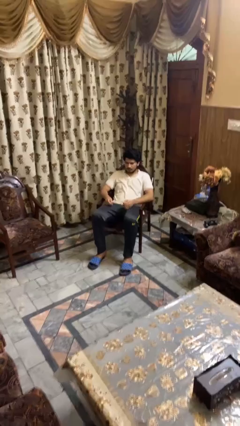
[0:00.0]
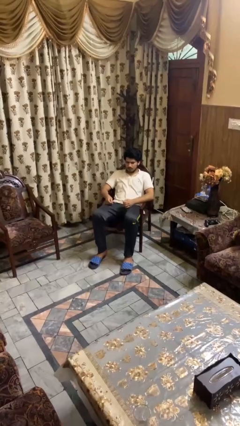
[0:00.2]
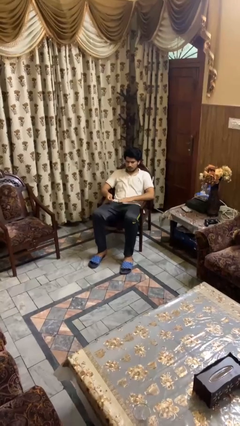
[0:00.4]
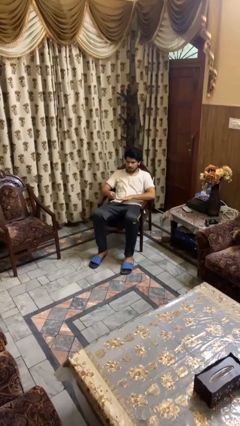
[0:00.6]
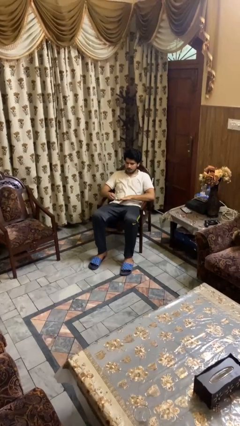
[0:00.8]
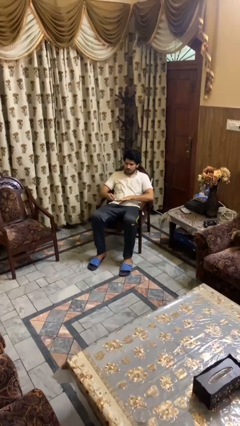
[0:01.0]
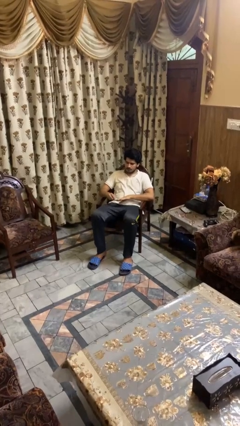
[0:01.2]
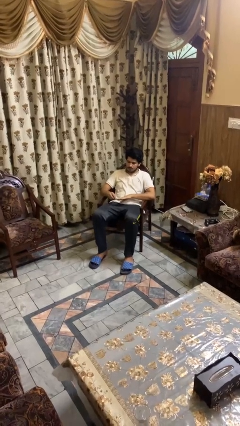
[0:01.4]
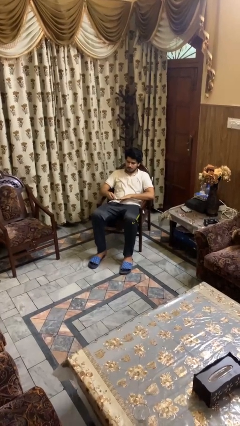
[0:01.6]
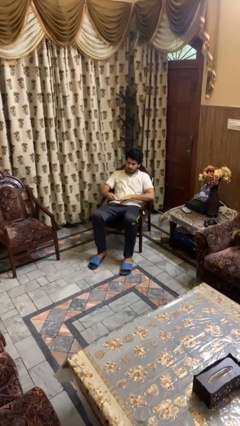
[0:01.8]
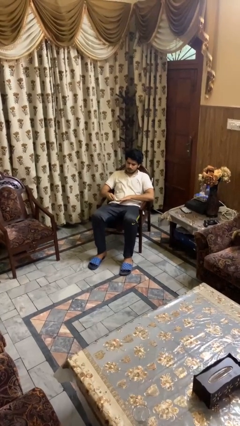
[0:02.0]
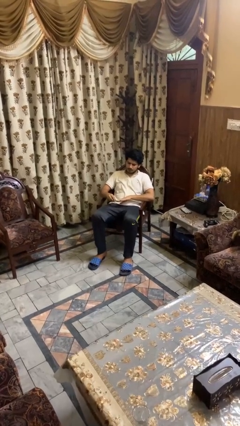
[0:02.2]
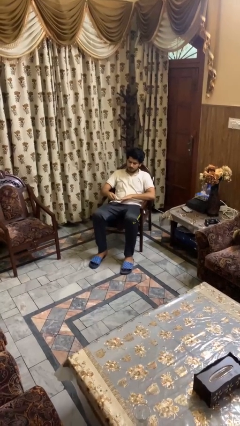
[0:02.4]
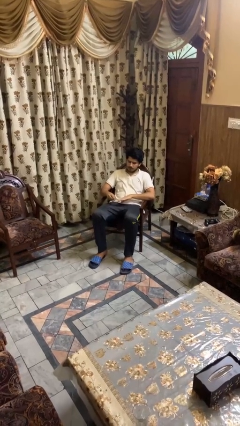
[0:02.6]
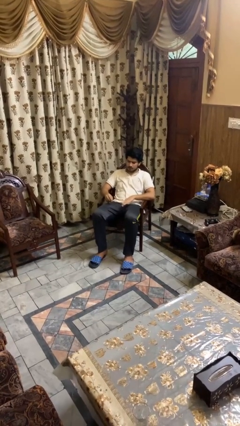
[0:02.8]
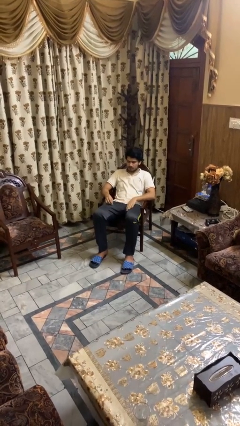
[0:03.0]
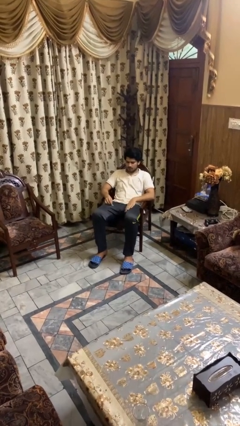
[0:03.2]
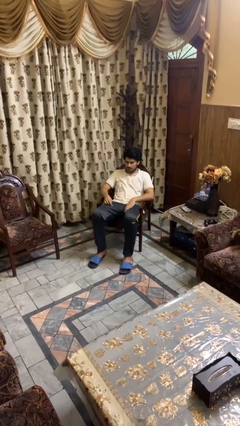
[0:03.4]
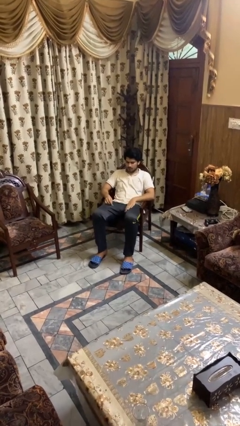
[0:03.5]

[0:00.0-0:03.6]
person files fingernails

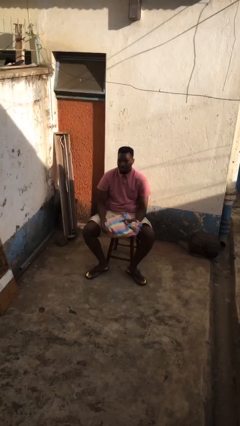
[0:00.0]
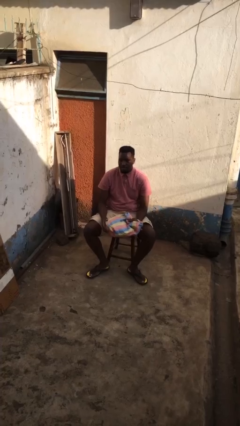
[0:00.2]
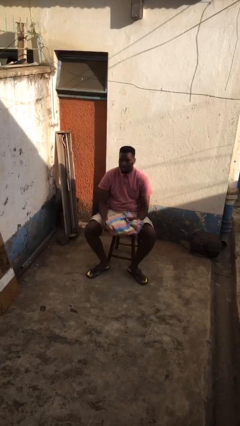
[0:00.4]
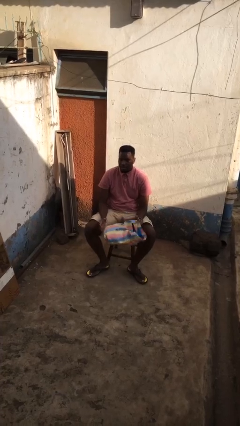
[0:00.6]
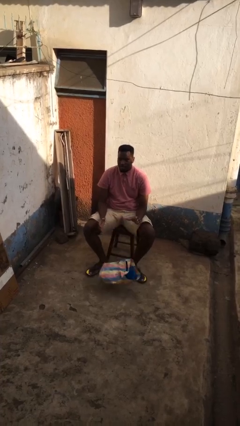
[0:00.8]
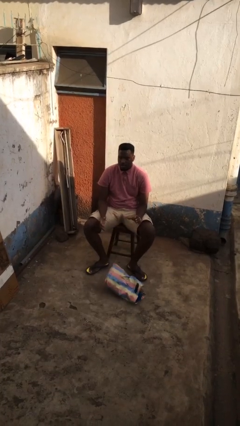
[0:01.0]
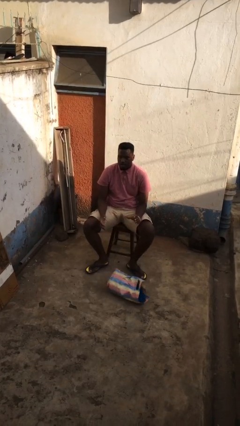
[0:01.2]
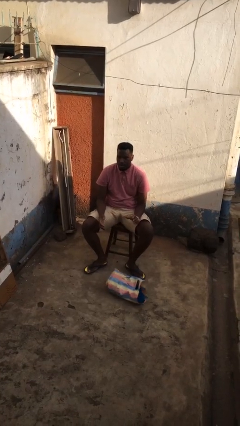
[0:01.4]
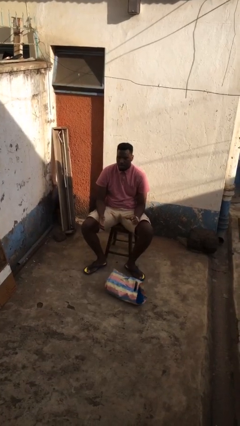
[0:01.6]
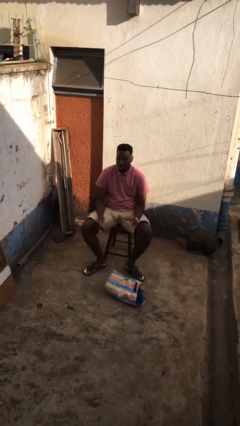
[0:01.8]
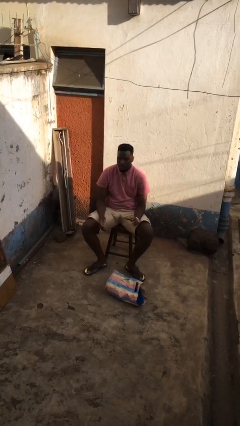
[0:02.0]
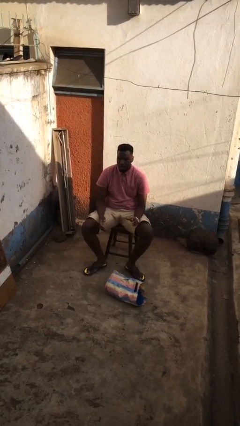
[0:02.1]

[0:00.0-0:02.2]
person drops object

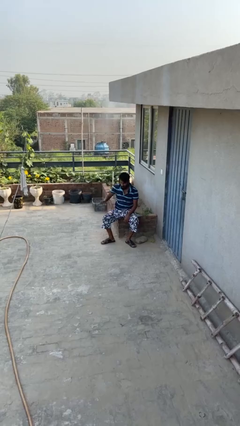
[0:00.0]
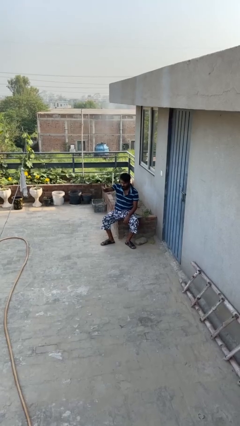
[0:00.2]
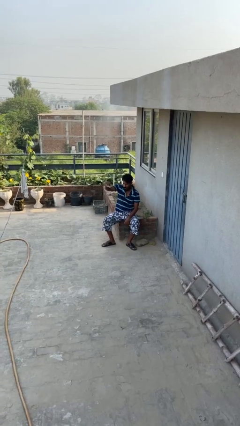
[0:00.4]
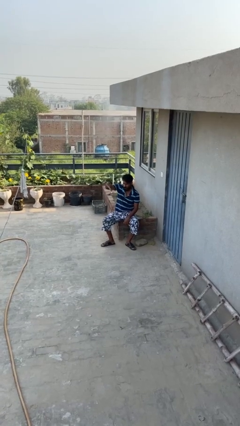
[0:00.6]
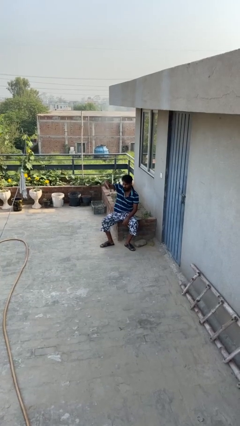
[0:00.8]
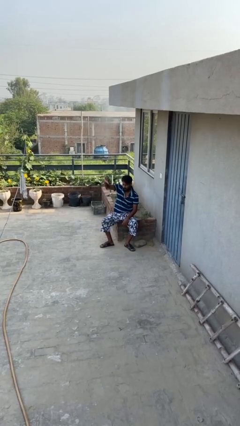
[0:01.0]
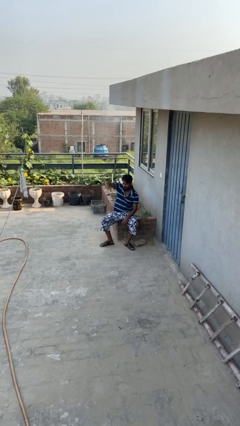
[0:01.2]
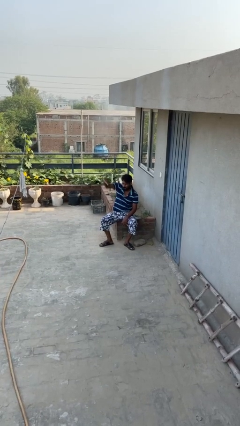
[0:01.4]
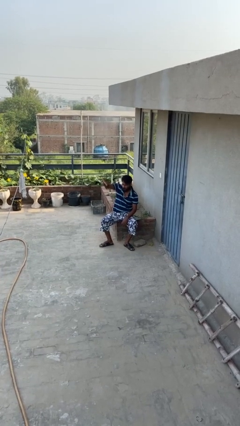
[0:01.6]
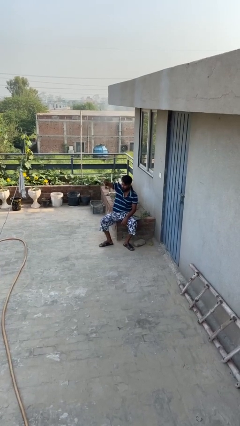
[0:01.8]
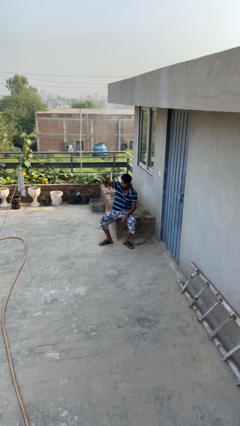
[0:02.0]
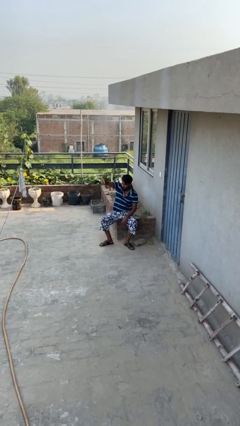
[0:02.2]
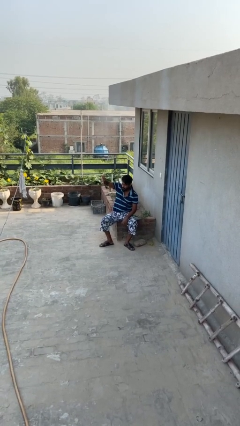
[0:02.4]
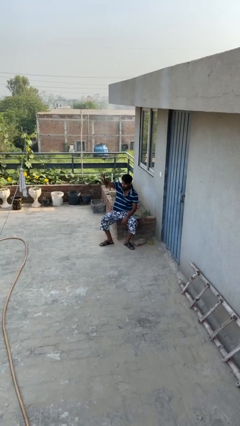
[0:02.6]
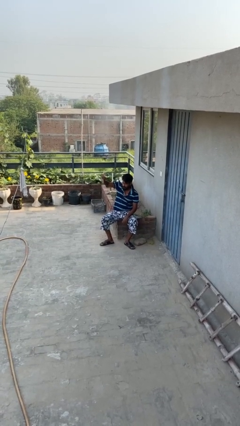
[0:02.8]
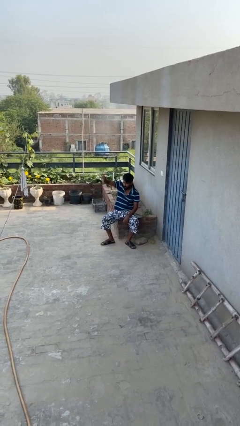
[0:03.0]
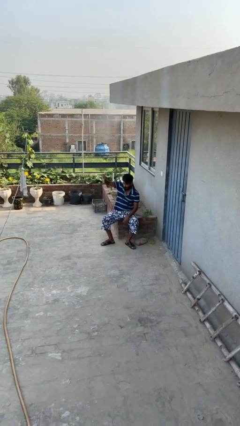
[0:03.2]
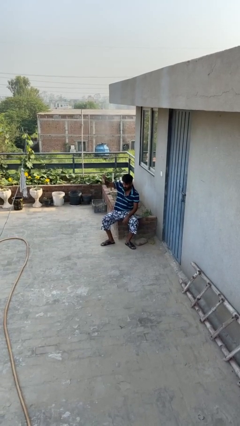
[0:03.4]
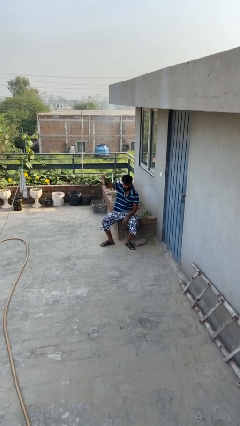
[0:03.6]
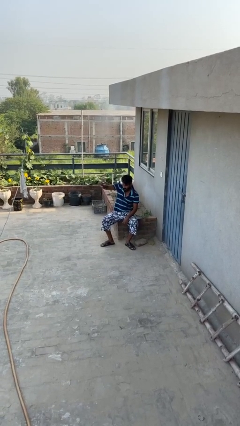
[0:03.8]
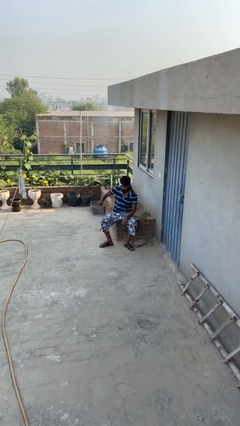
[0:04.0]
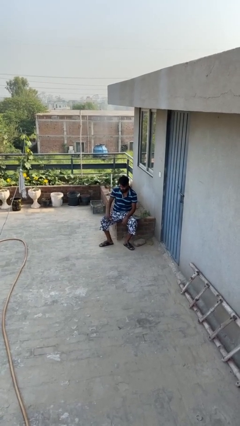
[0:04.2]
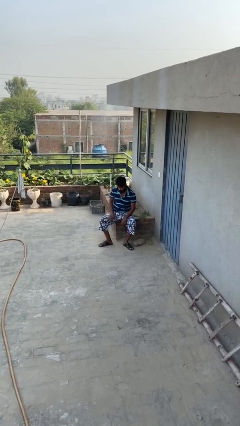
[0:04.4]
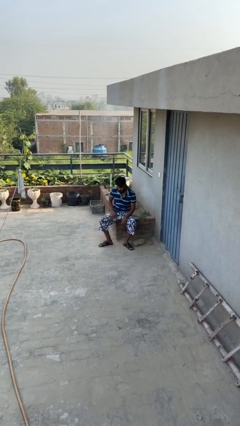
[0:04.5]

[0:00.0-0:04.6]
person gestures thumbs down

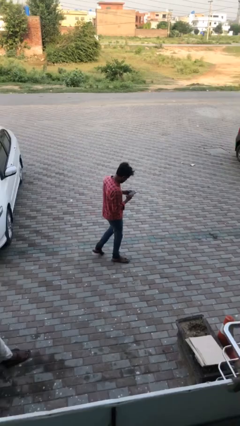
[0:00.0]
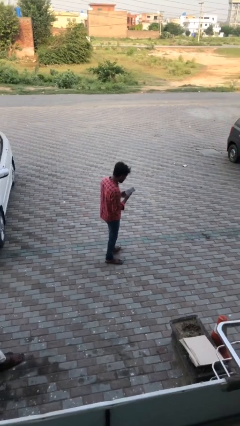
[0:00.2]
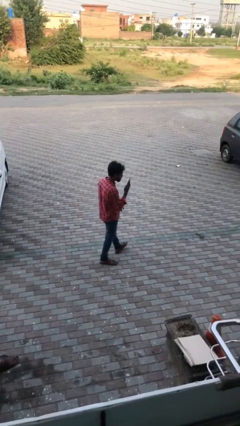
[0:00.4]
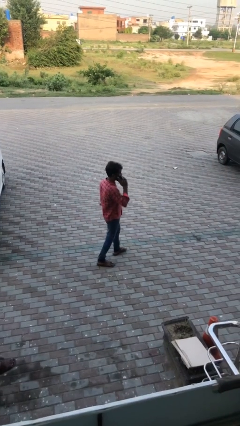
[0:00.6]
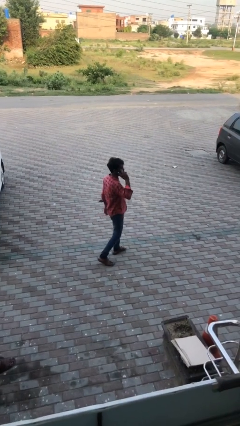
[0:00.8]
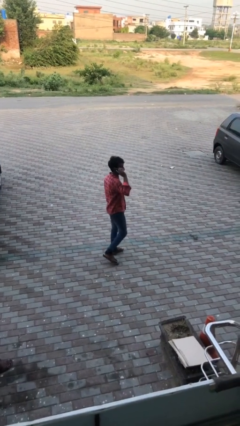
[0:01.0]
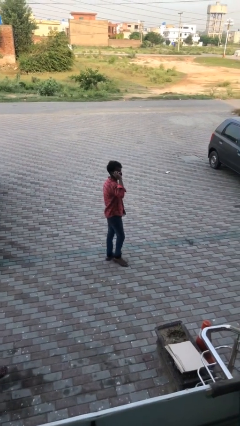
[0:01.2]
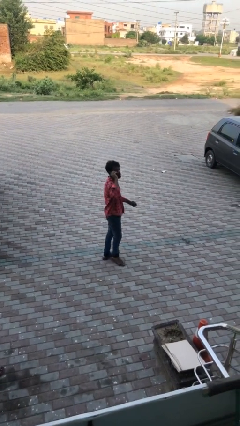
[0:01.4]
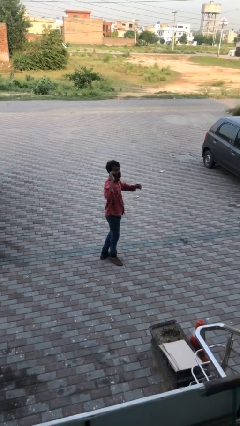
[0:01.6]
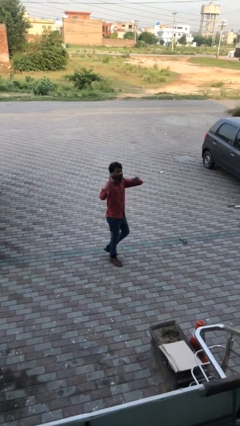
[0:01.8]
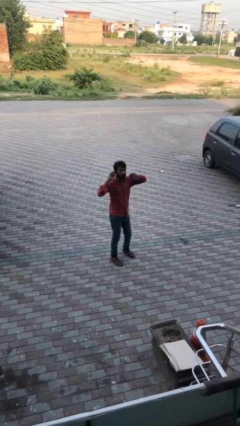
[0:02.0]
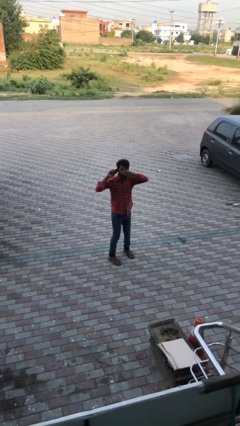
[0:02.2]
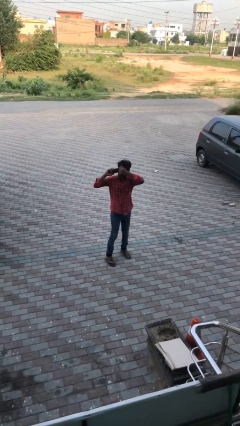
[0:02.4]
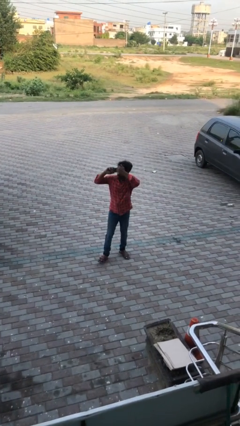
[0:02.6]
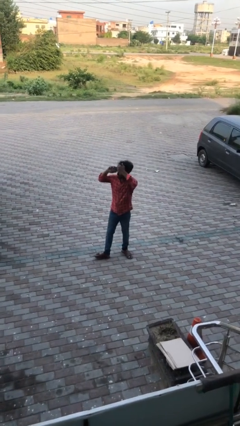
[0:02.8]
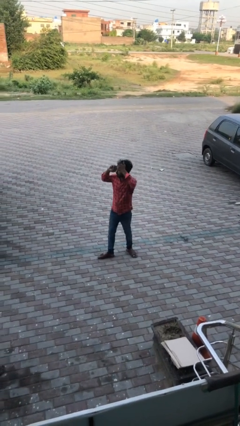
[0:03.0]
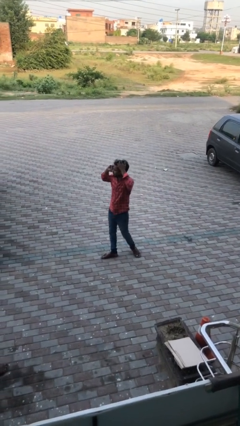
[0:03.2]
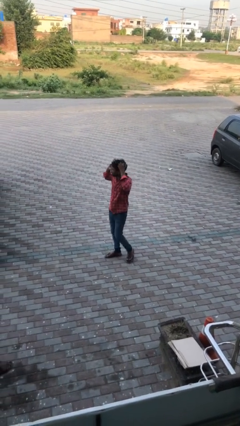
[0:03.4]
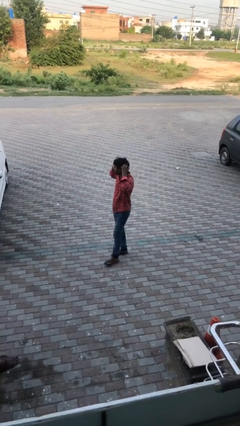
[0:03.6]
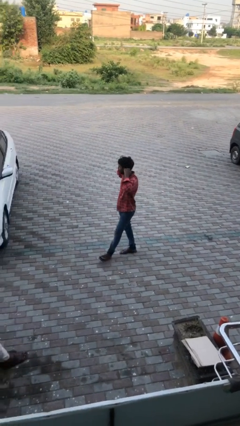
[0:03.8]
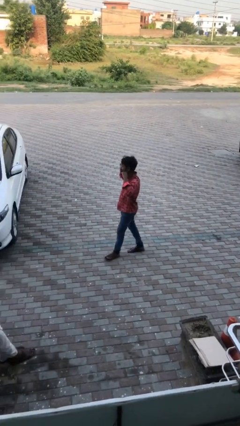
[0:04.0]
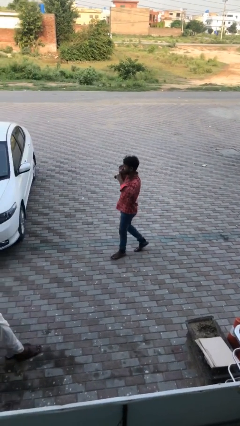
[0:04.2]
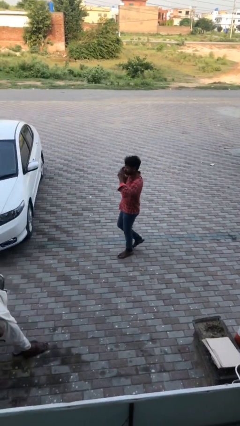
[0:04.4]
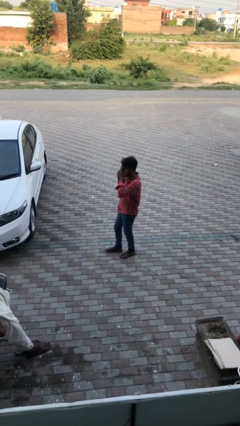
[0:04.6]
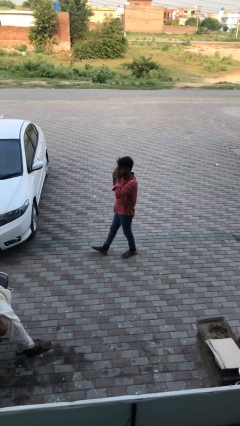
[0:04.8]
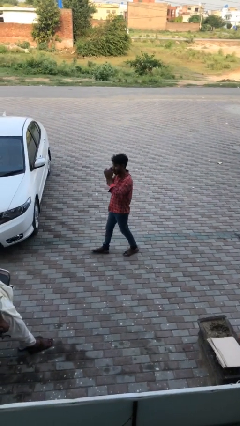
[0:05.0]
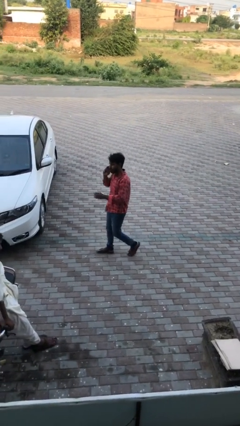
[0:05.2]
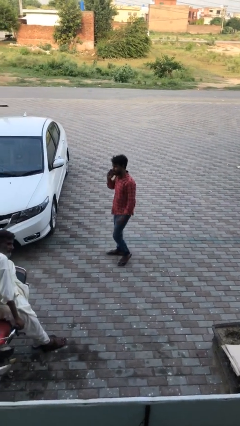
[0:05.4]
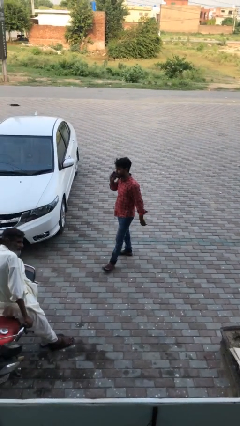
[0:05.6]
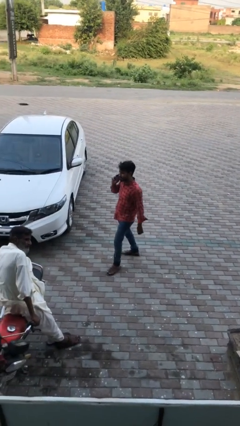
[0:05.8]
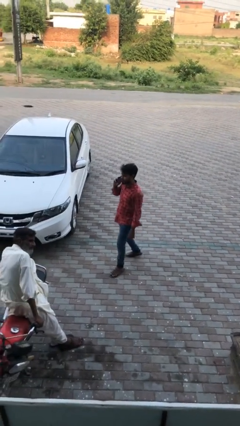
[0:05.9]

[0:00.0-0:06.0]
person talks on phone

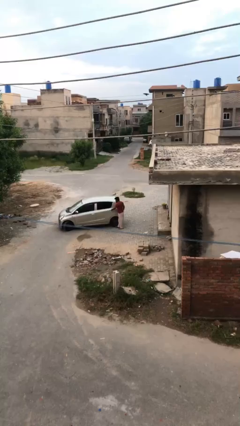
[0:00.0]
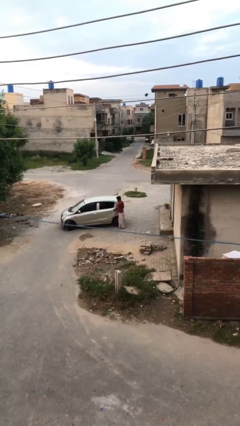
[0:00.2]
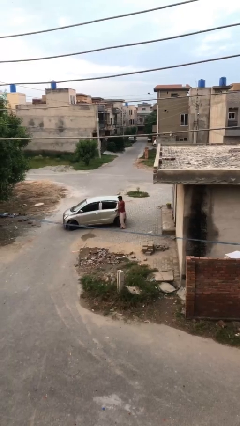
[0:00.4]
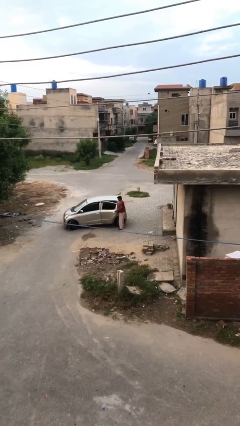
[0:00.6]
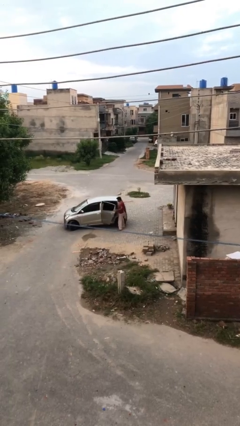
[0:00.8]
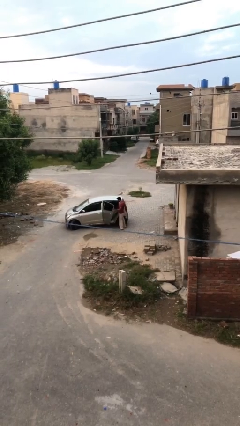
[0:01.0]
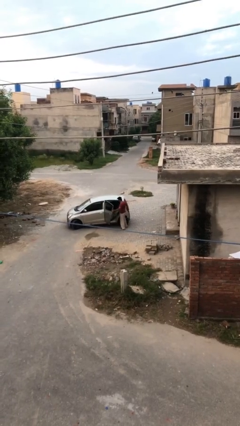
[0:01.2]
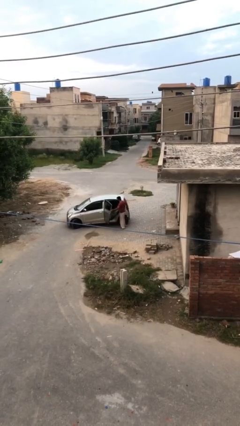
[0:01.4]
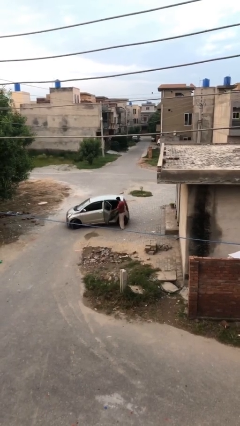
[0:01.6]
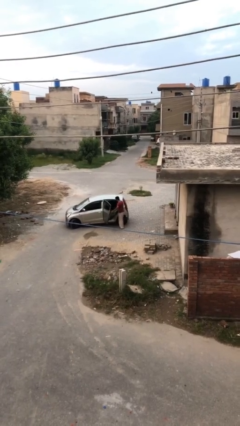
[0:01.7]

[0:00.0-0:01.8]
person opens car door
